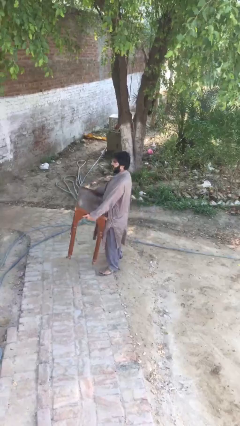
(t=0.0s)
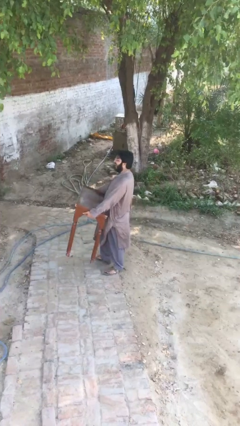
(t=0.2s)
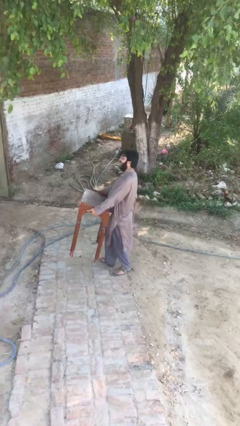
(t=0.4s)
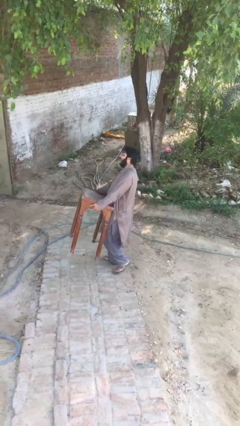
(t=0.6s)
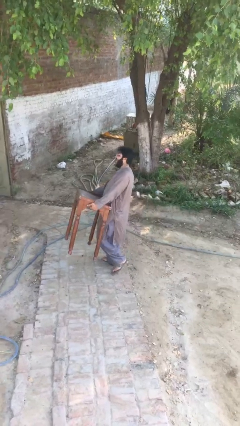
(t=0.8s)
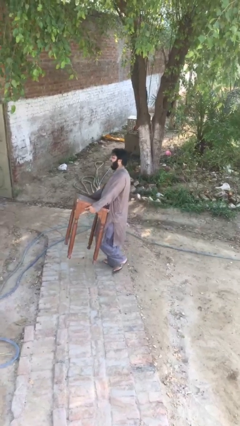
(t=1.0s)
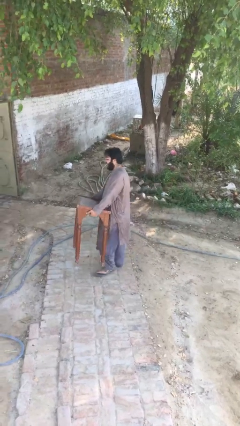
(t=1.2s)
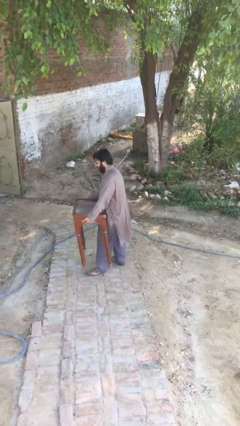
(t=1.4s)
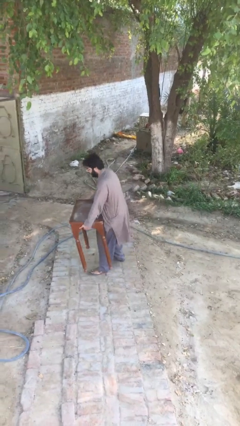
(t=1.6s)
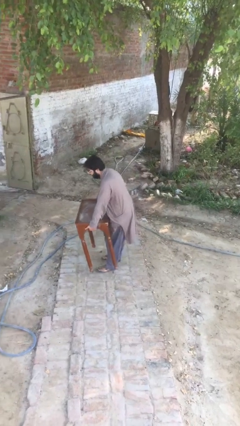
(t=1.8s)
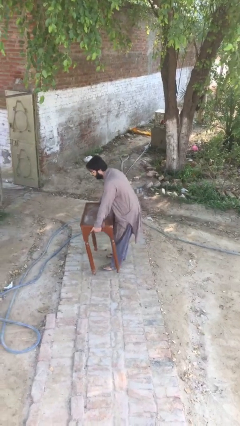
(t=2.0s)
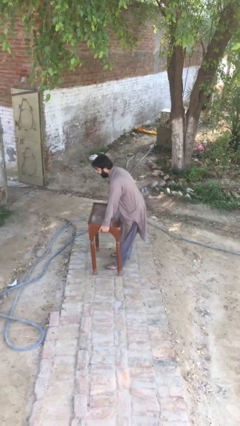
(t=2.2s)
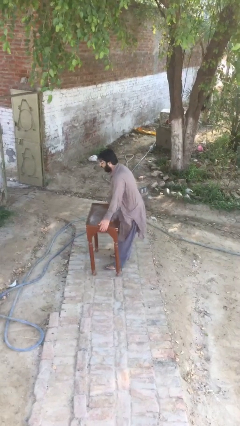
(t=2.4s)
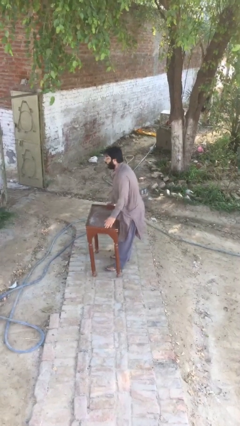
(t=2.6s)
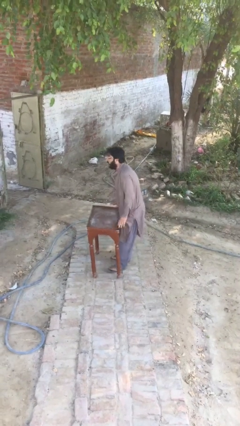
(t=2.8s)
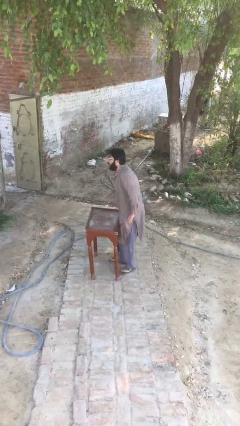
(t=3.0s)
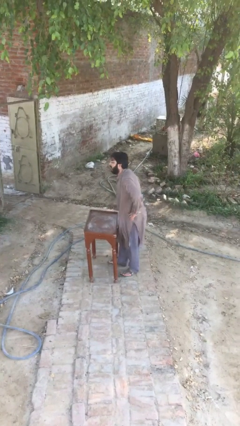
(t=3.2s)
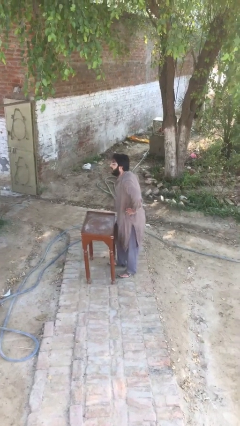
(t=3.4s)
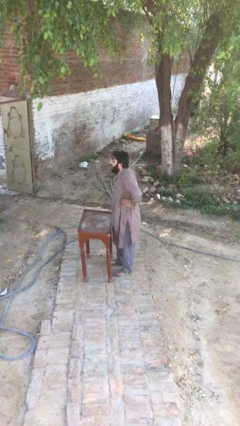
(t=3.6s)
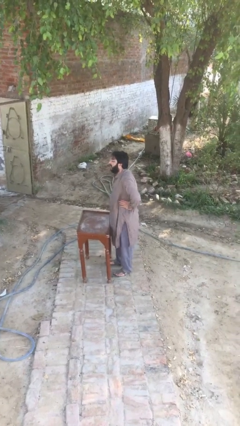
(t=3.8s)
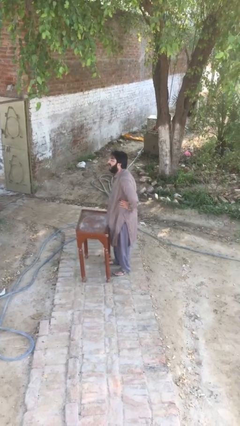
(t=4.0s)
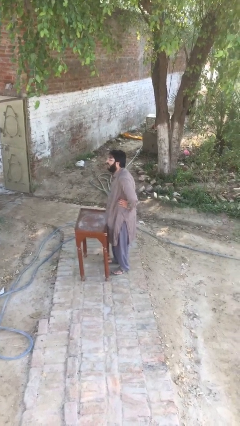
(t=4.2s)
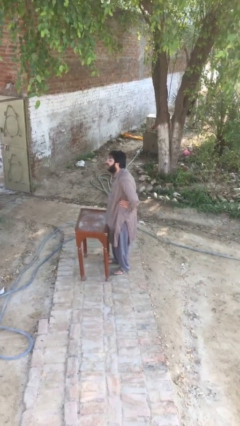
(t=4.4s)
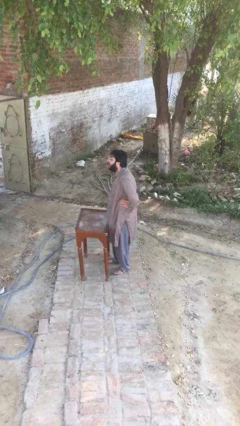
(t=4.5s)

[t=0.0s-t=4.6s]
person puts down object on floor

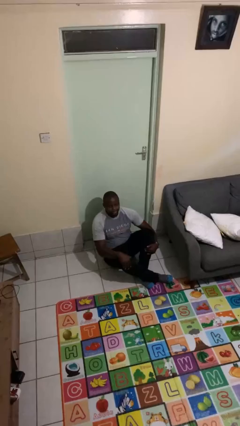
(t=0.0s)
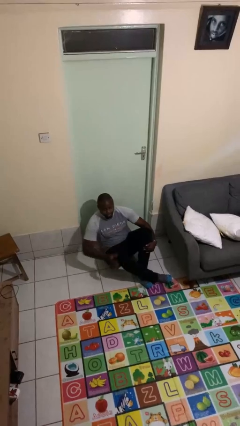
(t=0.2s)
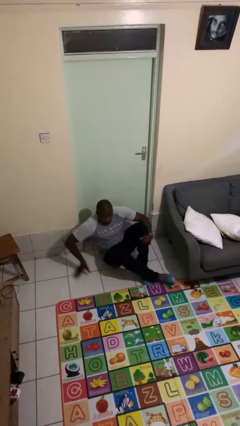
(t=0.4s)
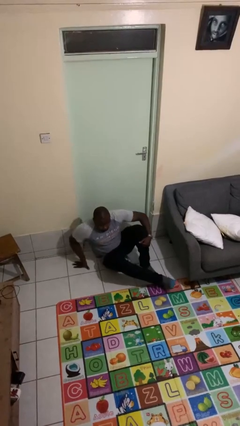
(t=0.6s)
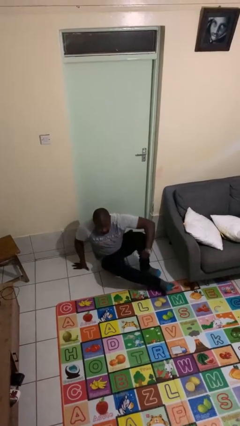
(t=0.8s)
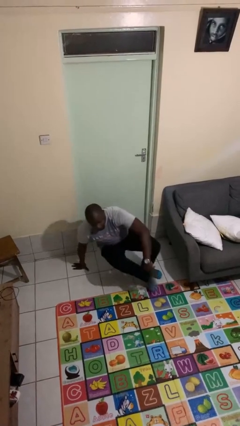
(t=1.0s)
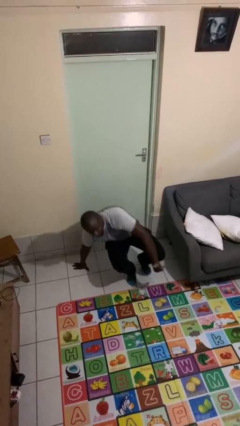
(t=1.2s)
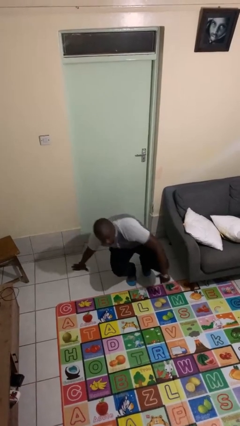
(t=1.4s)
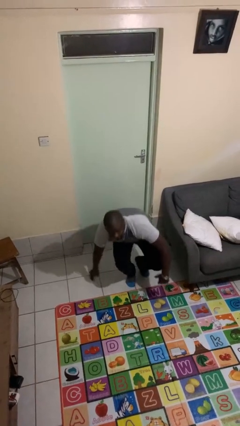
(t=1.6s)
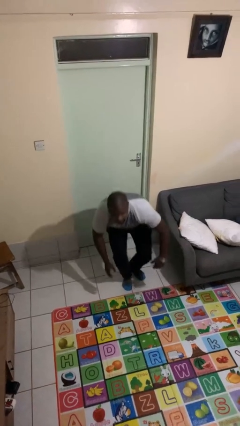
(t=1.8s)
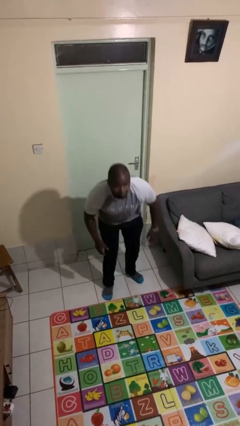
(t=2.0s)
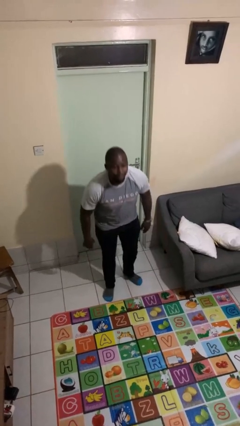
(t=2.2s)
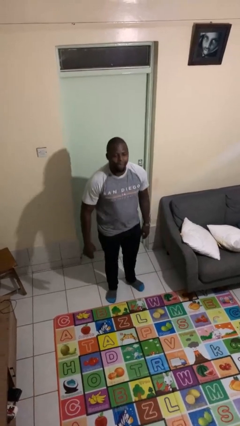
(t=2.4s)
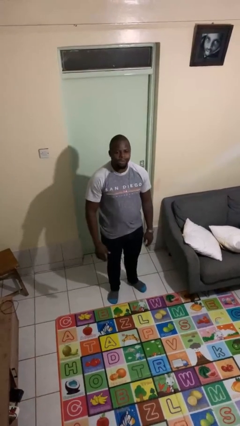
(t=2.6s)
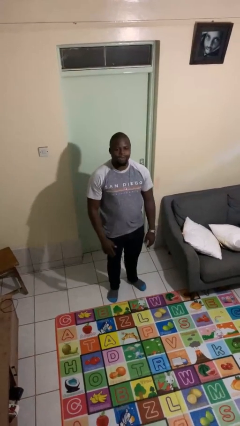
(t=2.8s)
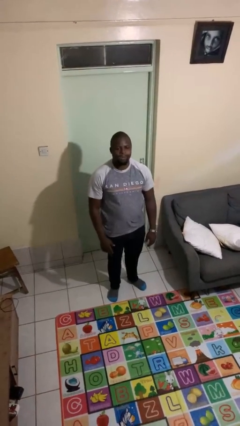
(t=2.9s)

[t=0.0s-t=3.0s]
person stands up from floor

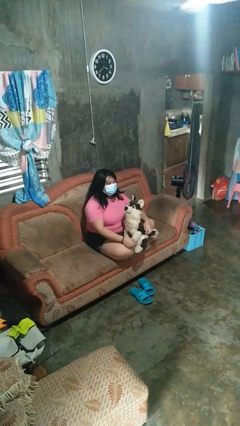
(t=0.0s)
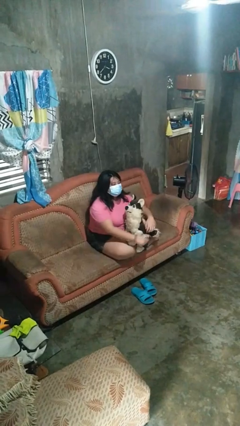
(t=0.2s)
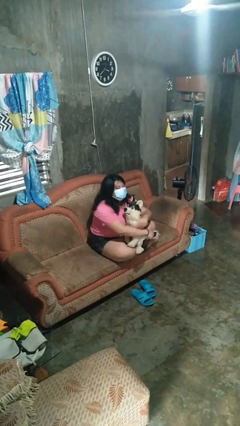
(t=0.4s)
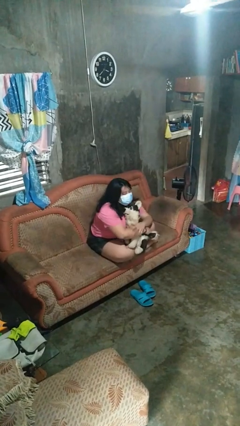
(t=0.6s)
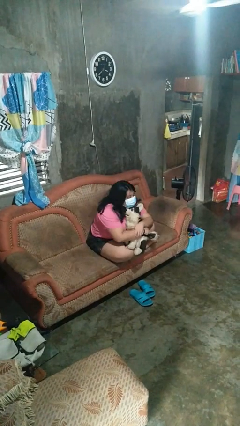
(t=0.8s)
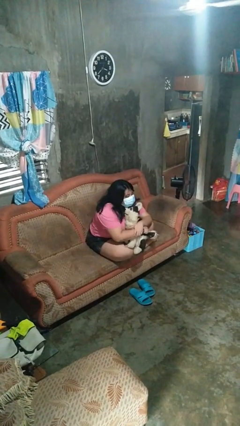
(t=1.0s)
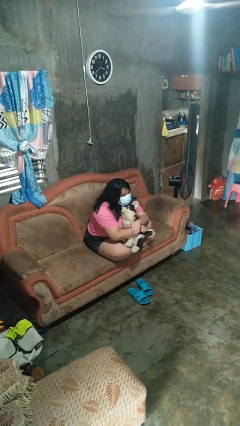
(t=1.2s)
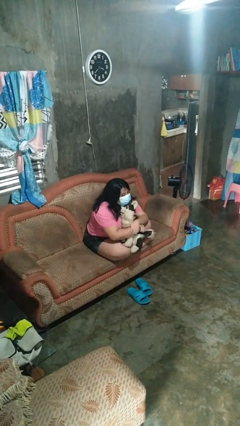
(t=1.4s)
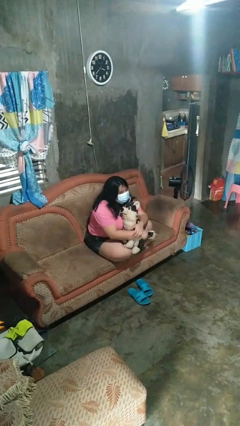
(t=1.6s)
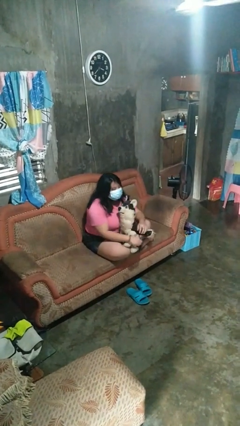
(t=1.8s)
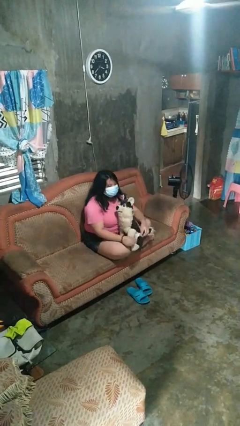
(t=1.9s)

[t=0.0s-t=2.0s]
person hugs stuffed animal

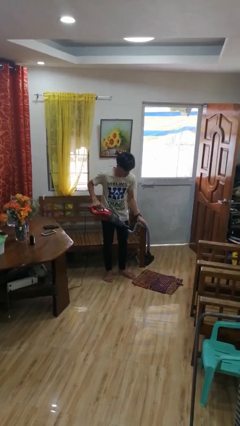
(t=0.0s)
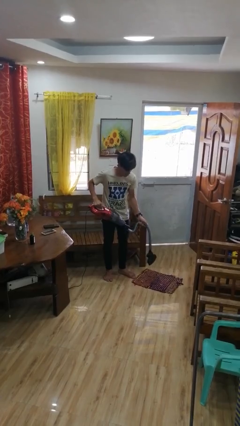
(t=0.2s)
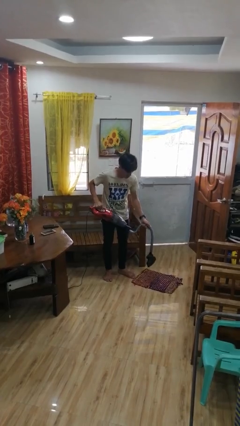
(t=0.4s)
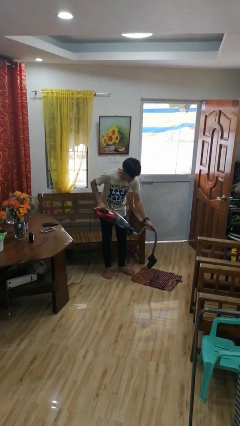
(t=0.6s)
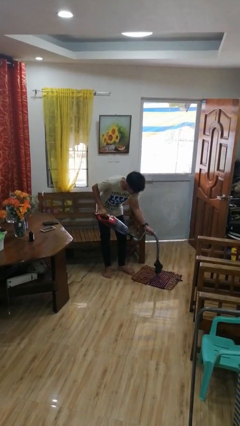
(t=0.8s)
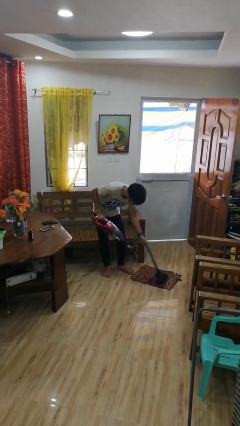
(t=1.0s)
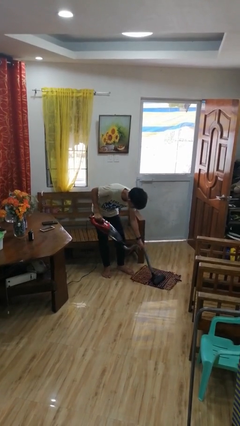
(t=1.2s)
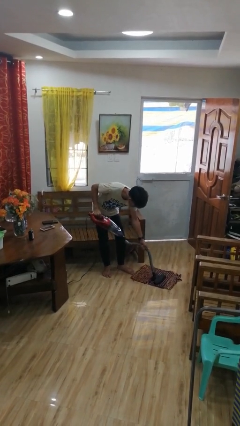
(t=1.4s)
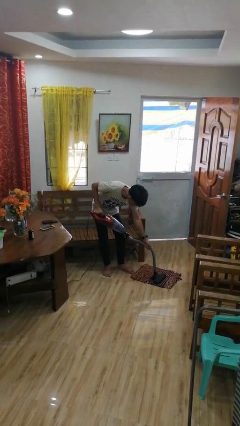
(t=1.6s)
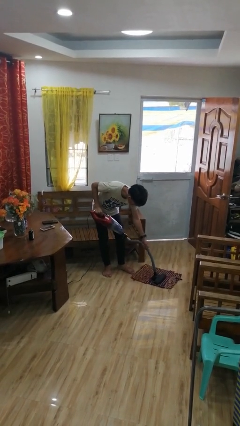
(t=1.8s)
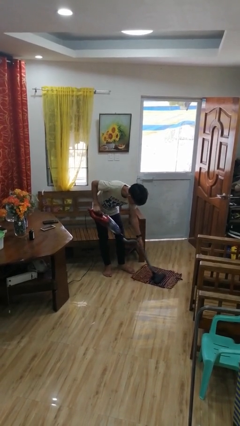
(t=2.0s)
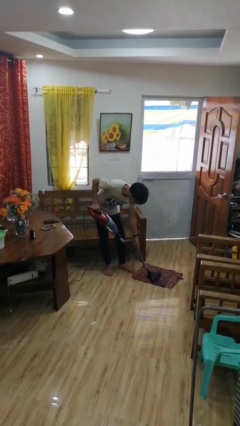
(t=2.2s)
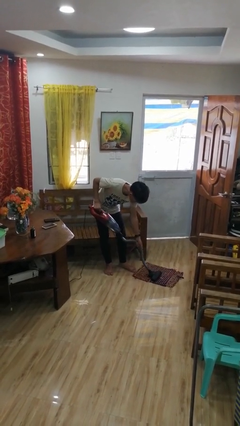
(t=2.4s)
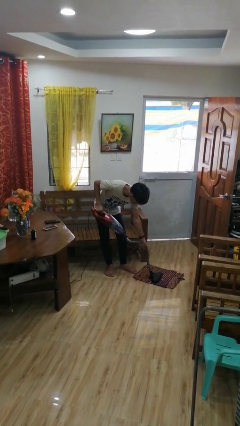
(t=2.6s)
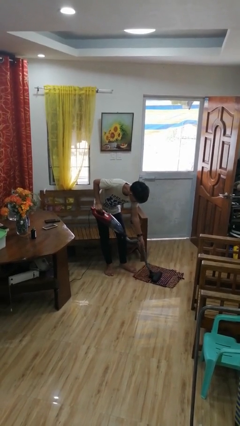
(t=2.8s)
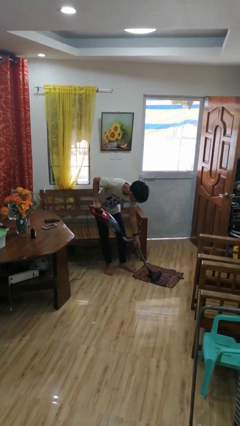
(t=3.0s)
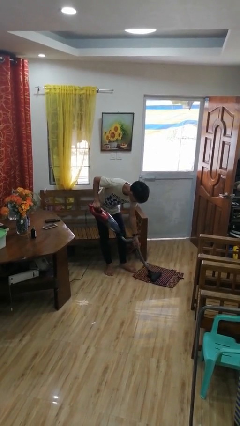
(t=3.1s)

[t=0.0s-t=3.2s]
person vacuums carpet

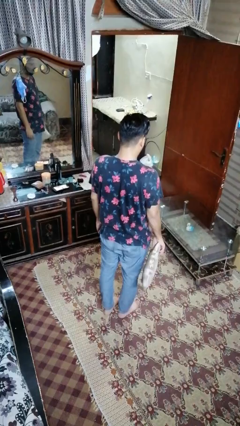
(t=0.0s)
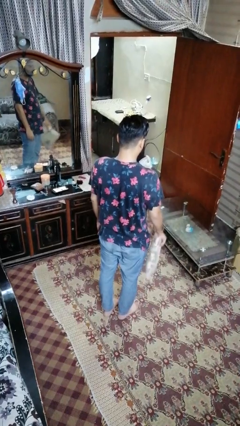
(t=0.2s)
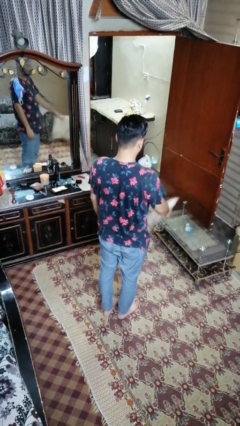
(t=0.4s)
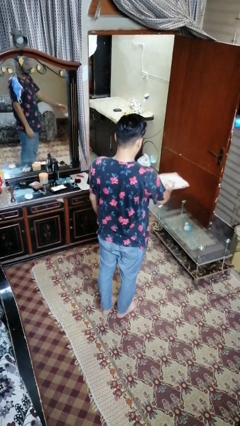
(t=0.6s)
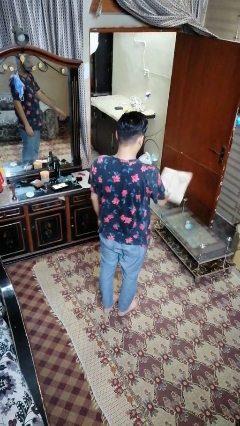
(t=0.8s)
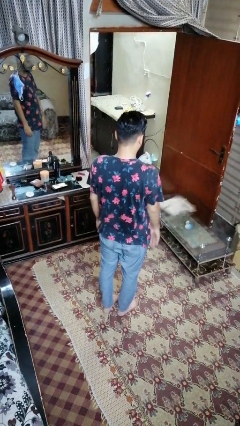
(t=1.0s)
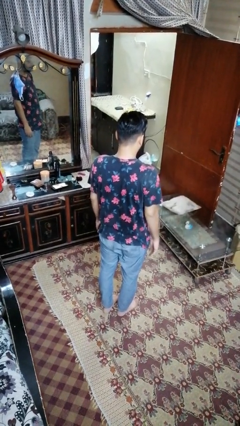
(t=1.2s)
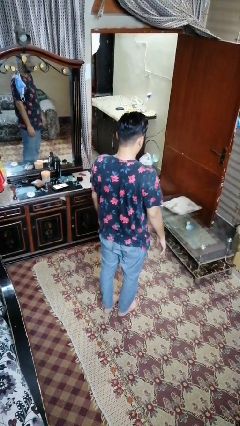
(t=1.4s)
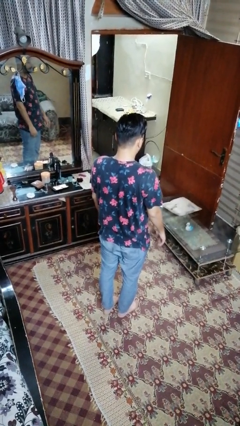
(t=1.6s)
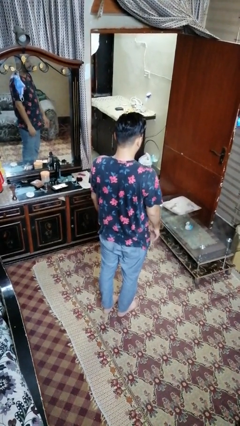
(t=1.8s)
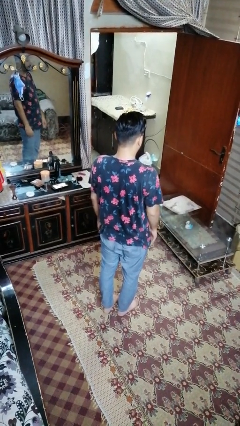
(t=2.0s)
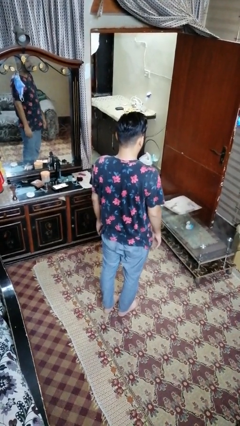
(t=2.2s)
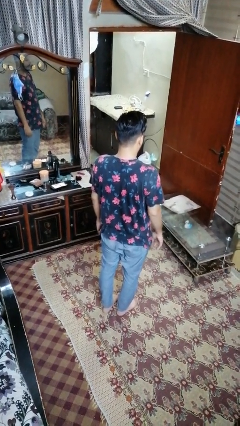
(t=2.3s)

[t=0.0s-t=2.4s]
person throws object on table

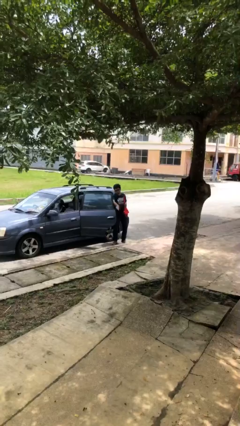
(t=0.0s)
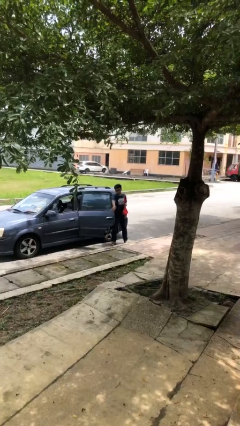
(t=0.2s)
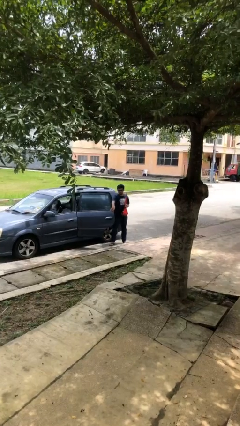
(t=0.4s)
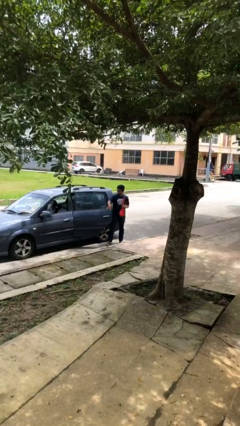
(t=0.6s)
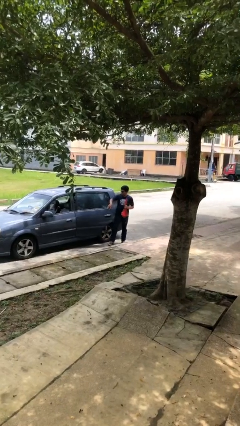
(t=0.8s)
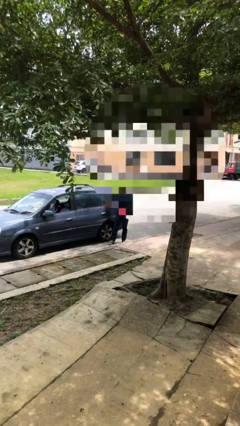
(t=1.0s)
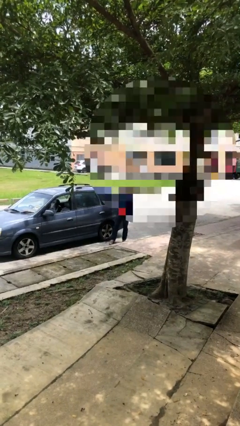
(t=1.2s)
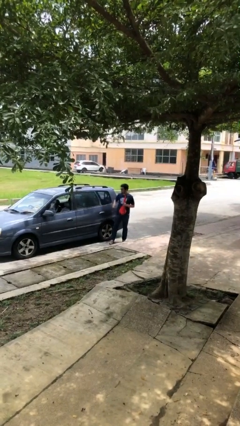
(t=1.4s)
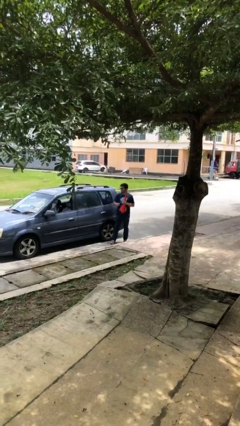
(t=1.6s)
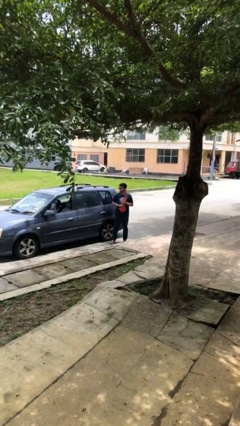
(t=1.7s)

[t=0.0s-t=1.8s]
person closes car door

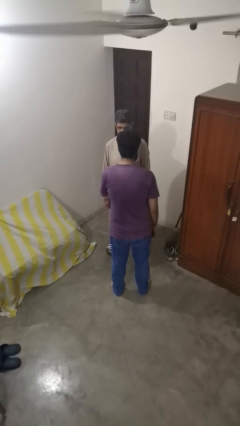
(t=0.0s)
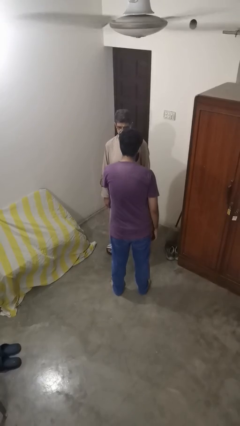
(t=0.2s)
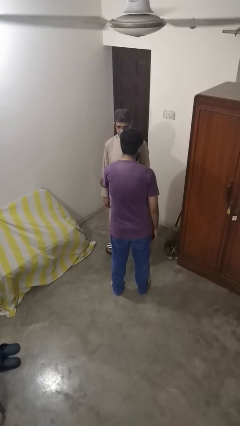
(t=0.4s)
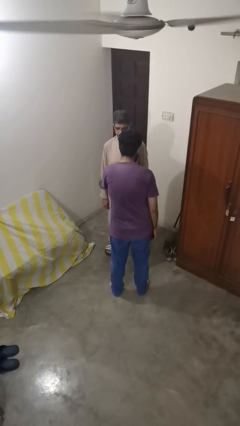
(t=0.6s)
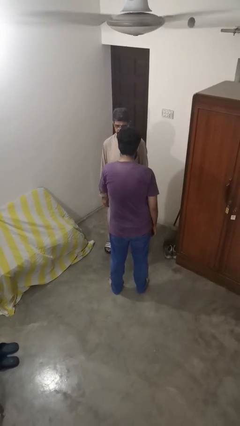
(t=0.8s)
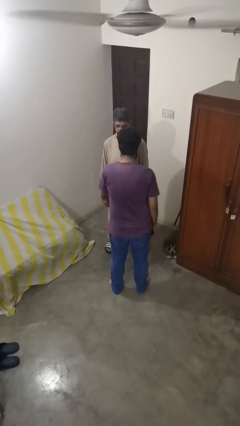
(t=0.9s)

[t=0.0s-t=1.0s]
person grabs person by forearm
